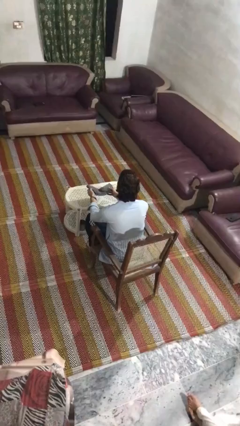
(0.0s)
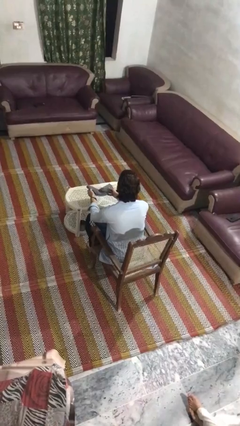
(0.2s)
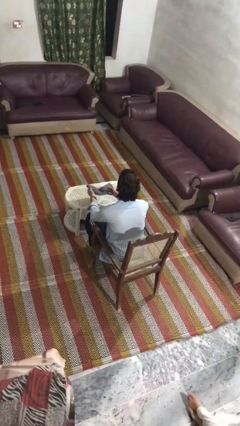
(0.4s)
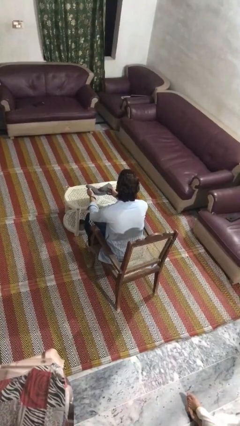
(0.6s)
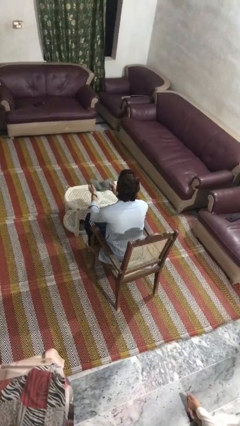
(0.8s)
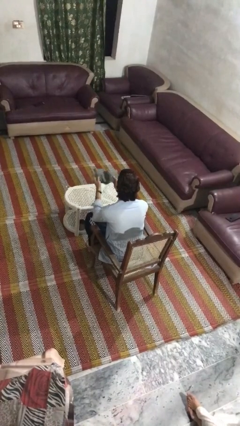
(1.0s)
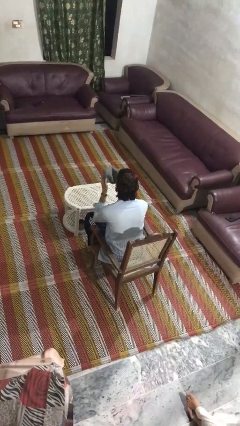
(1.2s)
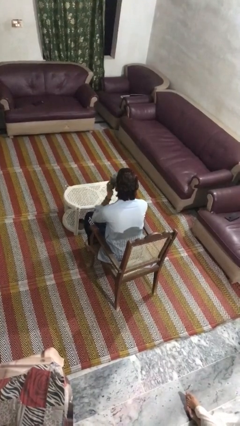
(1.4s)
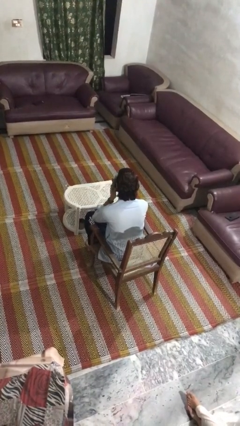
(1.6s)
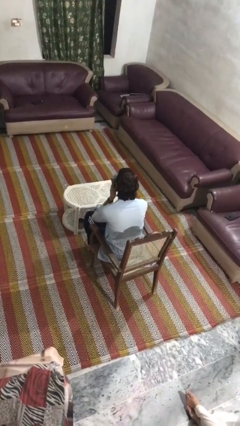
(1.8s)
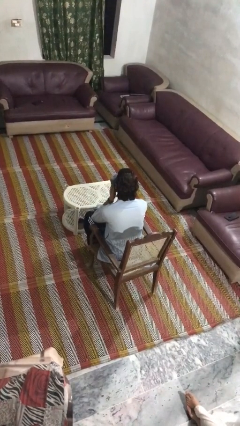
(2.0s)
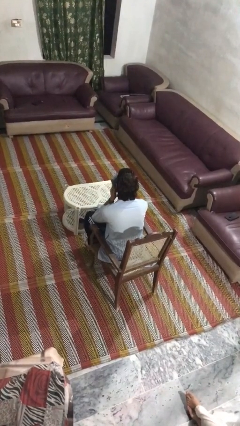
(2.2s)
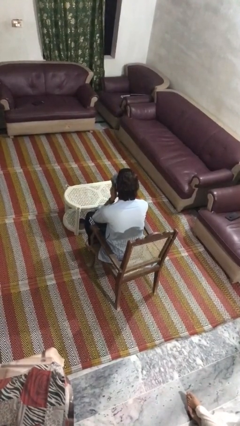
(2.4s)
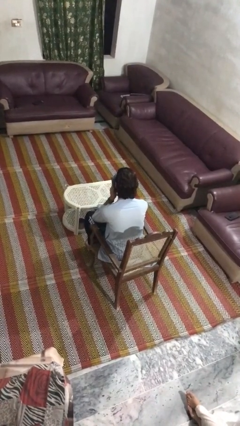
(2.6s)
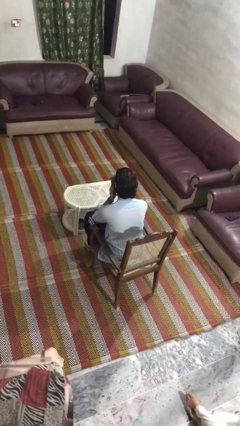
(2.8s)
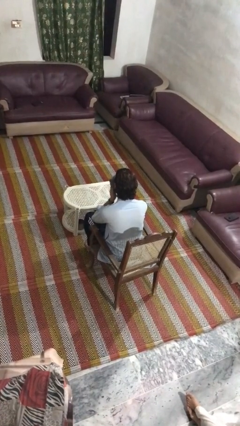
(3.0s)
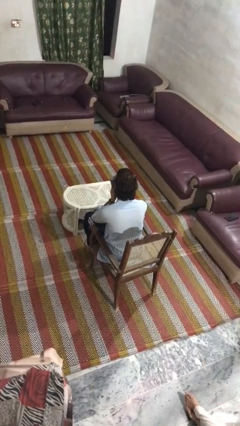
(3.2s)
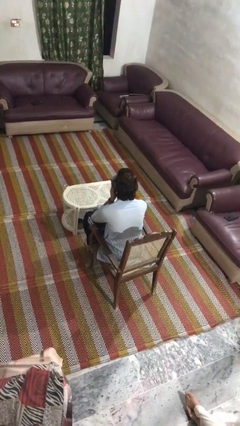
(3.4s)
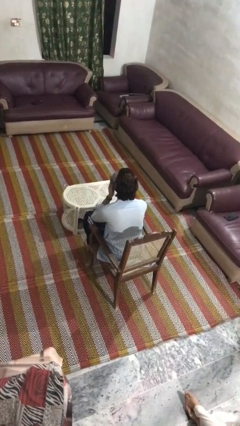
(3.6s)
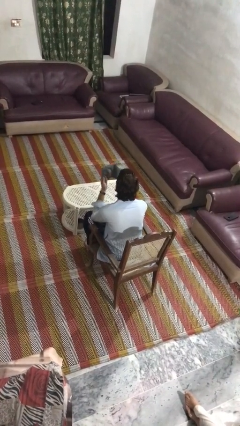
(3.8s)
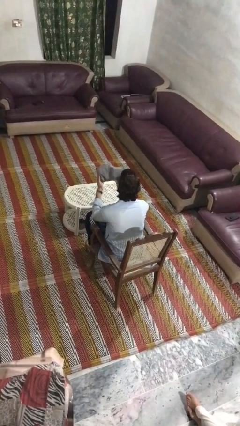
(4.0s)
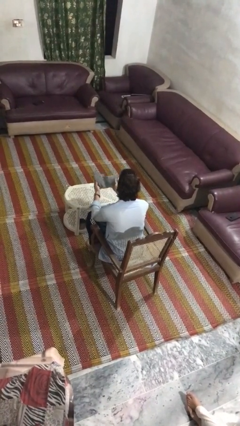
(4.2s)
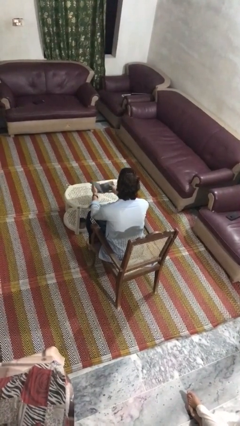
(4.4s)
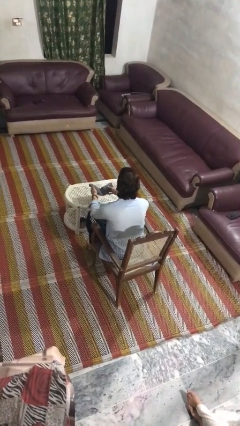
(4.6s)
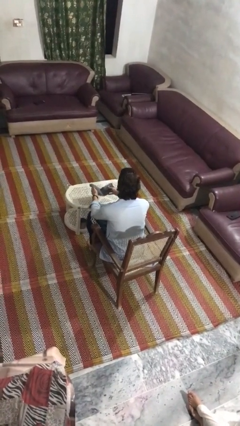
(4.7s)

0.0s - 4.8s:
person wipes mouth with napkin

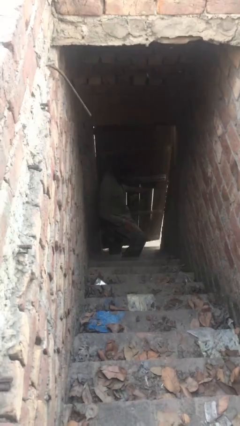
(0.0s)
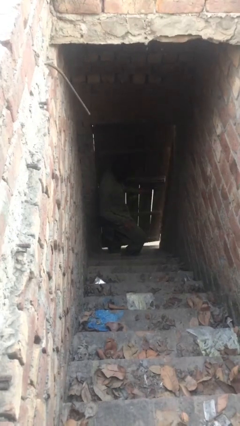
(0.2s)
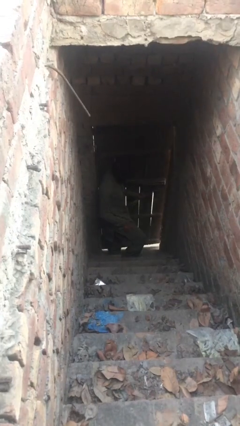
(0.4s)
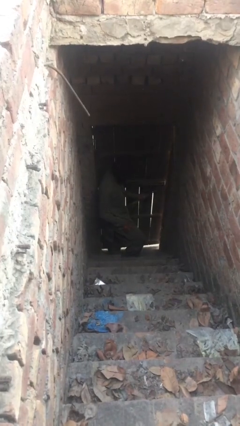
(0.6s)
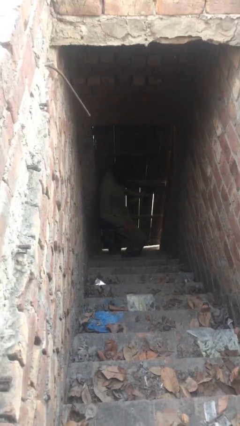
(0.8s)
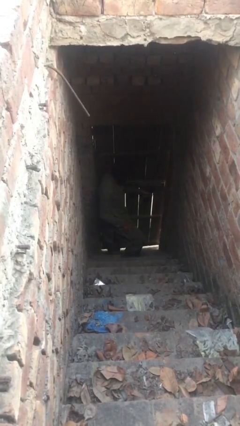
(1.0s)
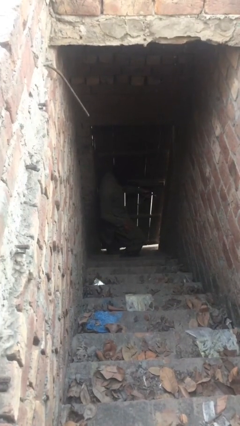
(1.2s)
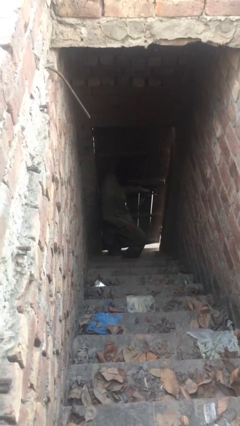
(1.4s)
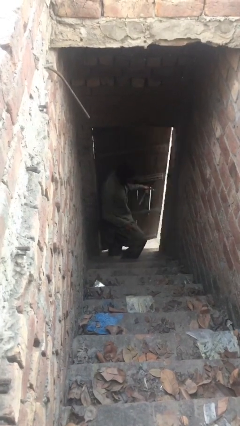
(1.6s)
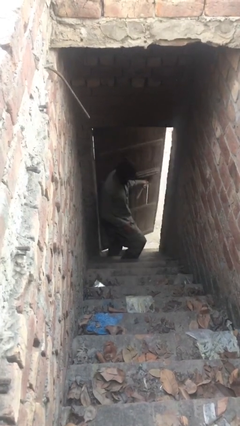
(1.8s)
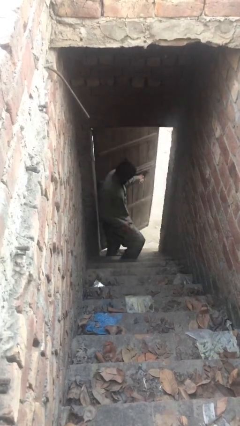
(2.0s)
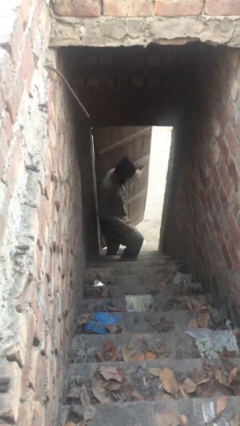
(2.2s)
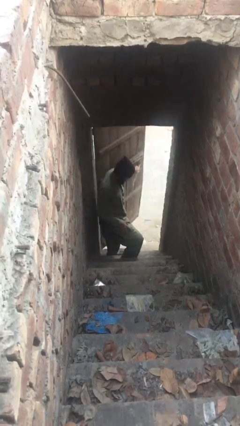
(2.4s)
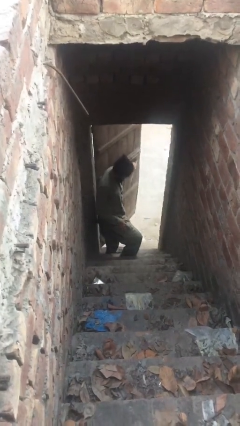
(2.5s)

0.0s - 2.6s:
person opens facility door

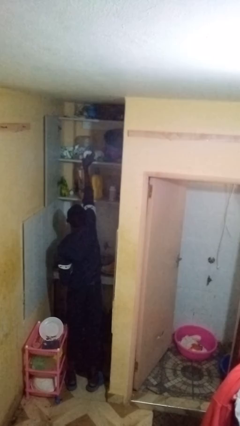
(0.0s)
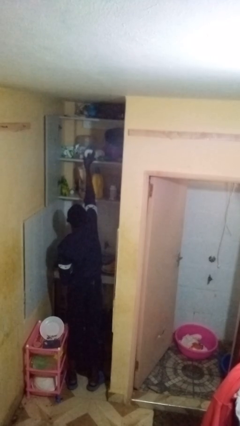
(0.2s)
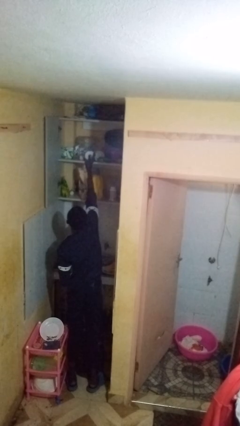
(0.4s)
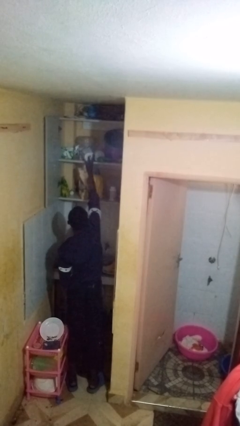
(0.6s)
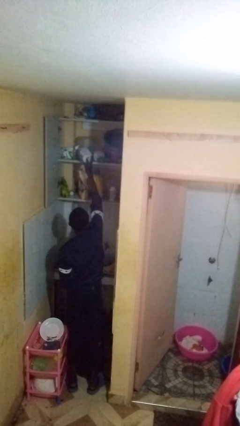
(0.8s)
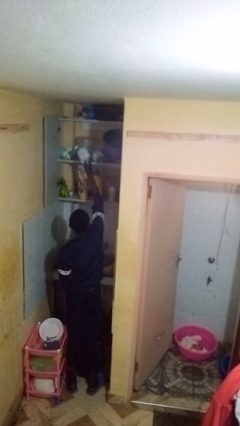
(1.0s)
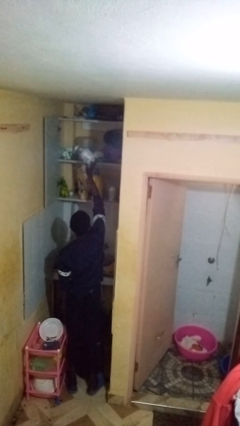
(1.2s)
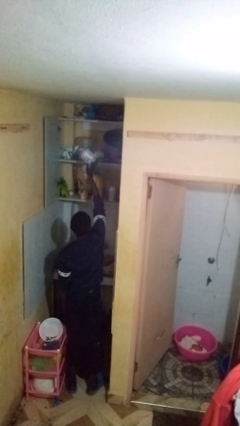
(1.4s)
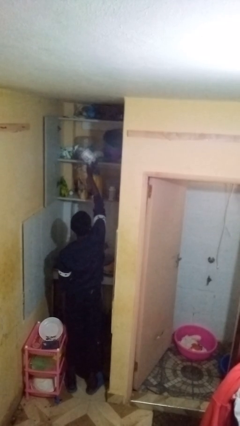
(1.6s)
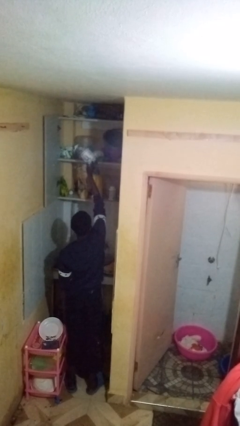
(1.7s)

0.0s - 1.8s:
person takes object from cabinet

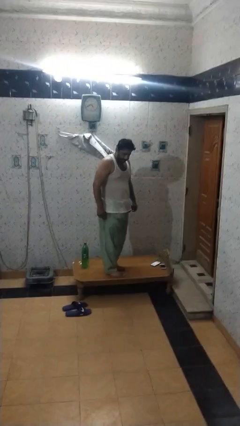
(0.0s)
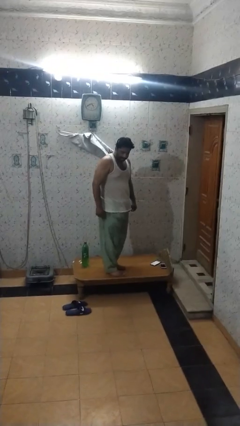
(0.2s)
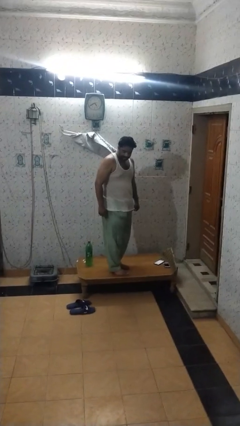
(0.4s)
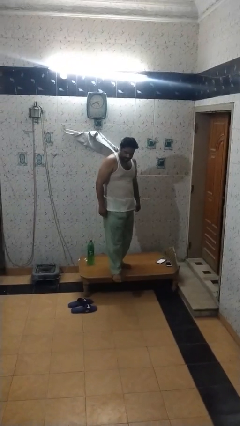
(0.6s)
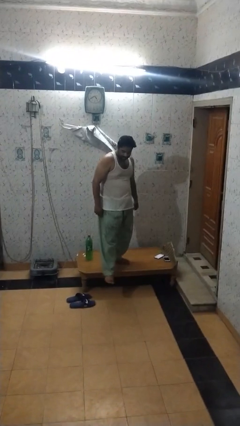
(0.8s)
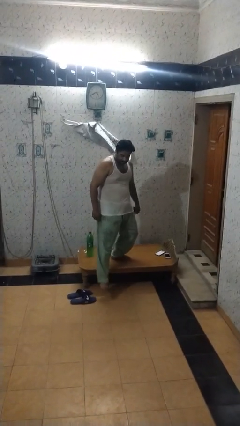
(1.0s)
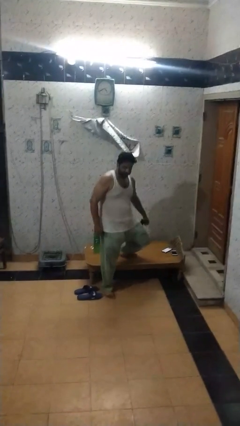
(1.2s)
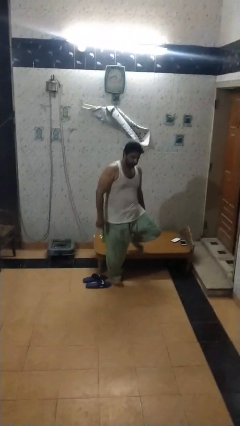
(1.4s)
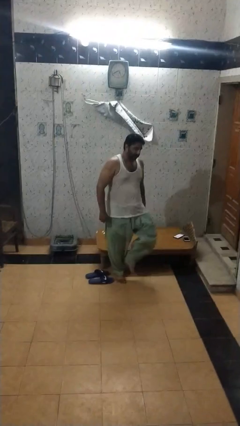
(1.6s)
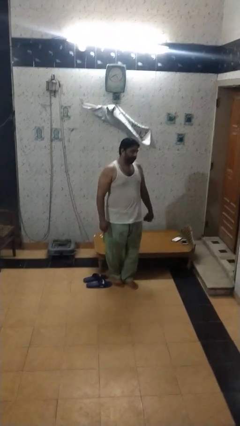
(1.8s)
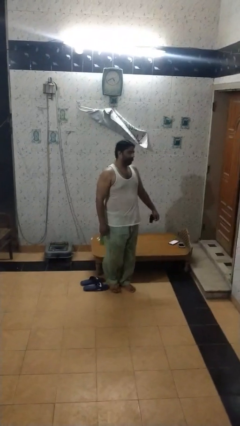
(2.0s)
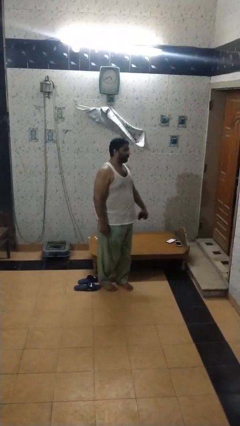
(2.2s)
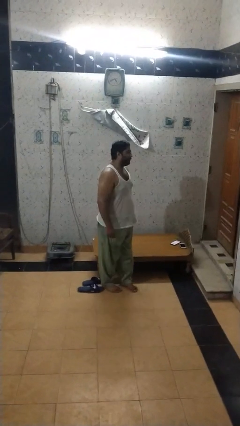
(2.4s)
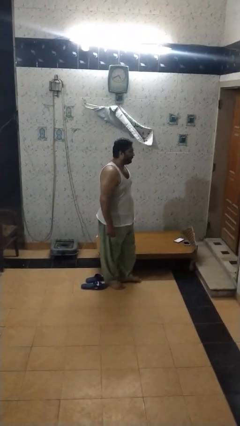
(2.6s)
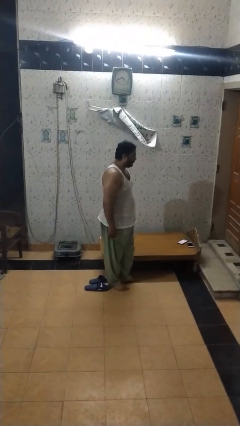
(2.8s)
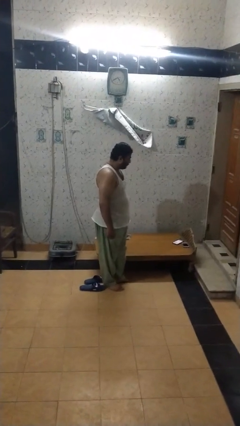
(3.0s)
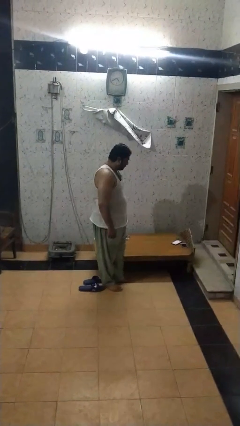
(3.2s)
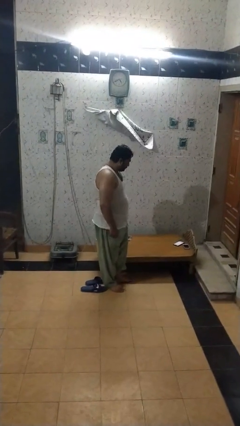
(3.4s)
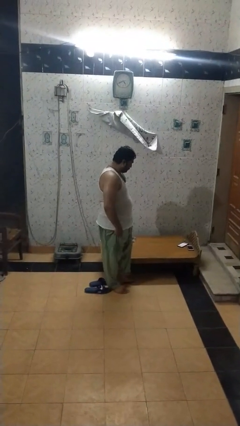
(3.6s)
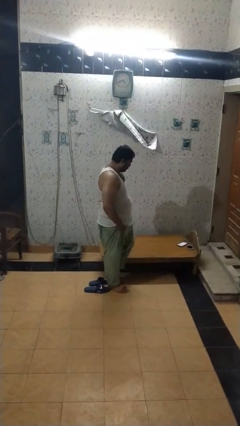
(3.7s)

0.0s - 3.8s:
person climbs off table

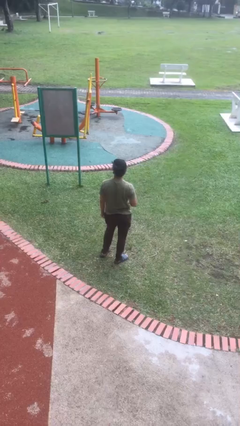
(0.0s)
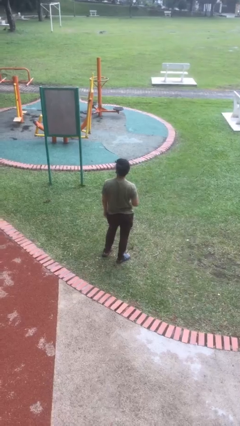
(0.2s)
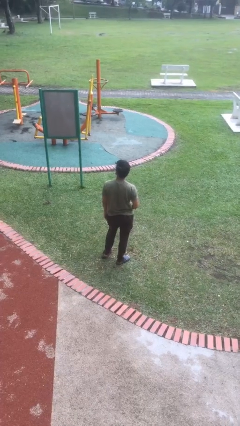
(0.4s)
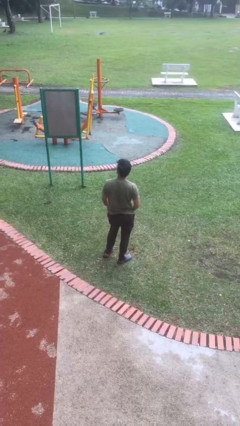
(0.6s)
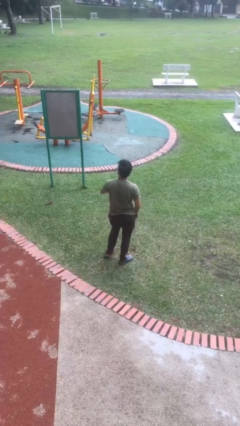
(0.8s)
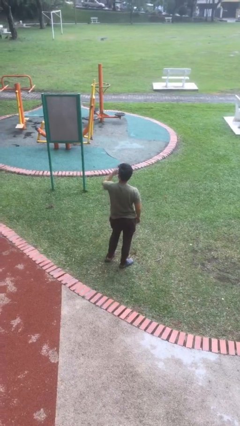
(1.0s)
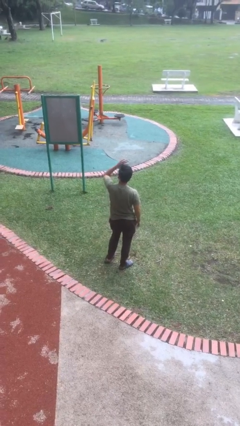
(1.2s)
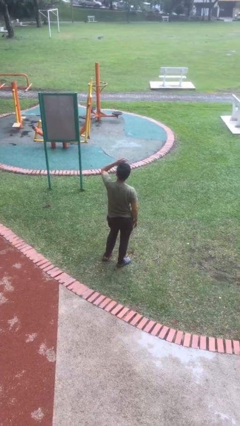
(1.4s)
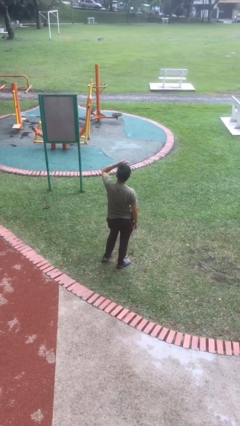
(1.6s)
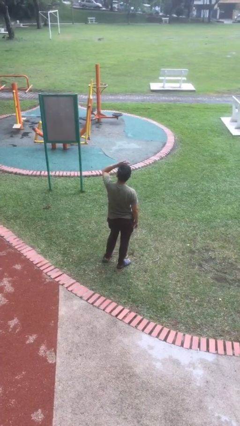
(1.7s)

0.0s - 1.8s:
person shades eyes

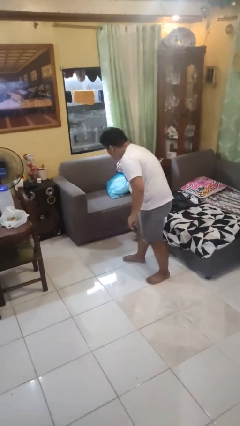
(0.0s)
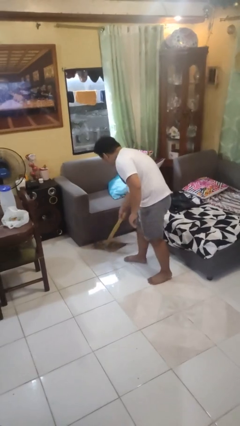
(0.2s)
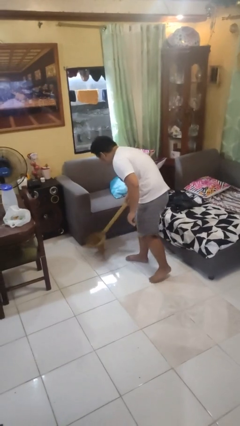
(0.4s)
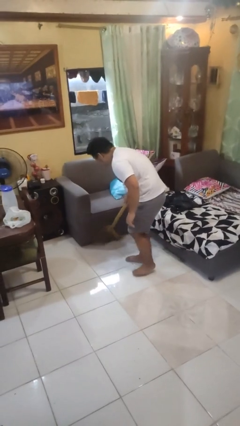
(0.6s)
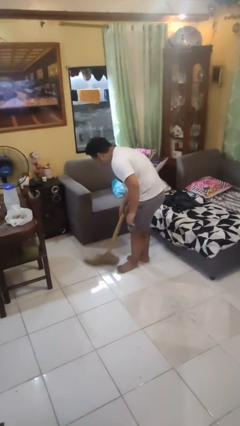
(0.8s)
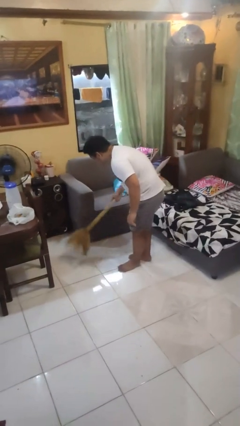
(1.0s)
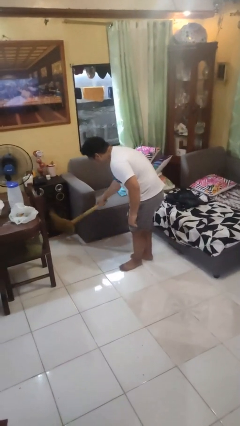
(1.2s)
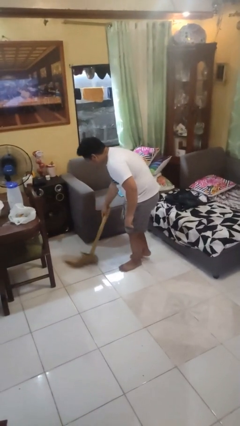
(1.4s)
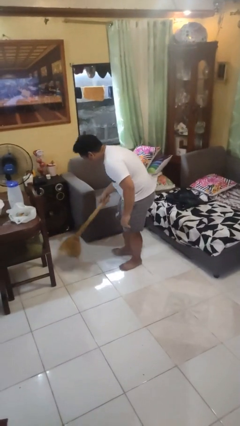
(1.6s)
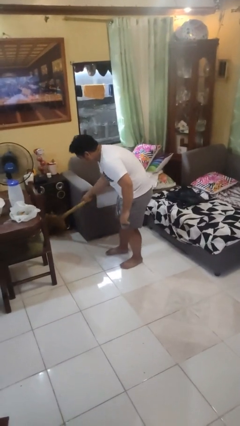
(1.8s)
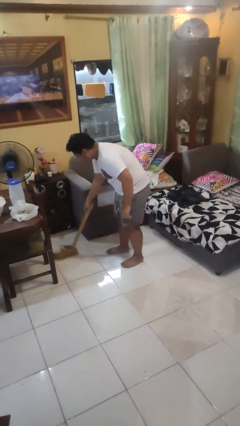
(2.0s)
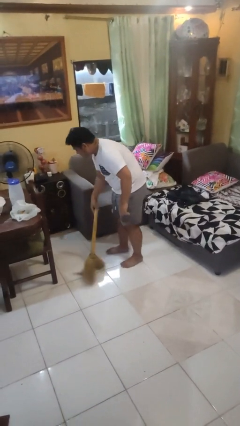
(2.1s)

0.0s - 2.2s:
person sweeps floor

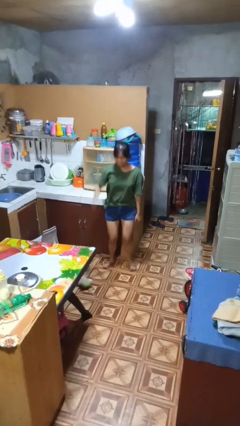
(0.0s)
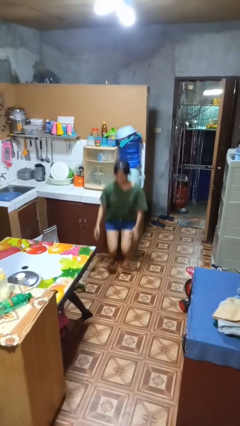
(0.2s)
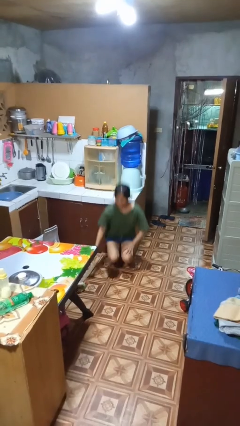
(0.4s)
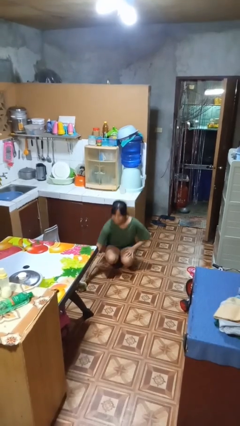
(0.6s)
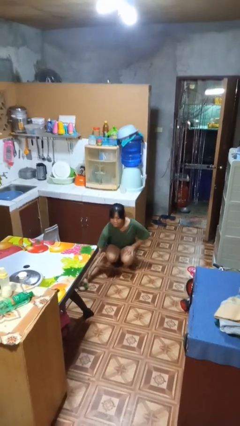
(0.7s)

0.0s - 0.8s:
person picks up object from floor
